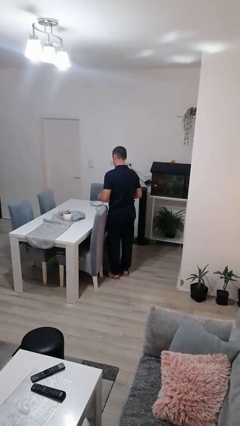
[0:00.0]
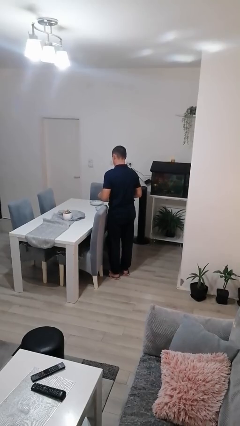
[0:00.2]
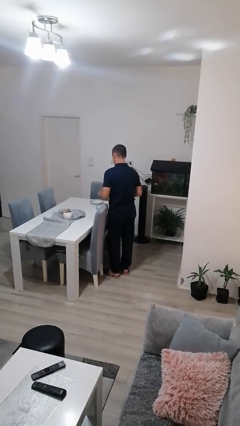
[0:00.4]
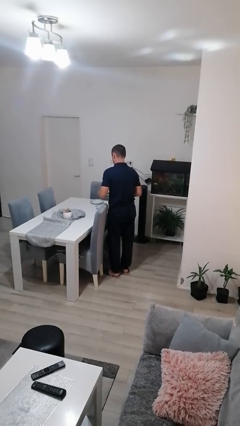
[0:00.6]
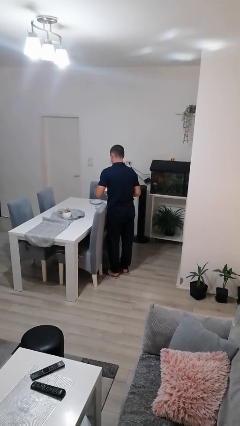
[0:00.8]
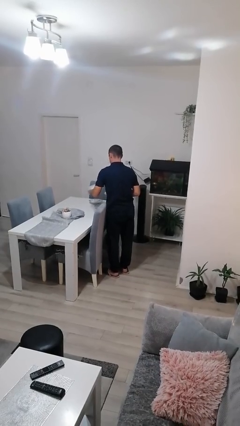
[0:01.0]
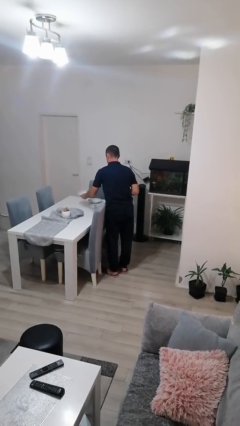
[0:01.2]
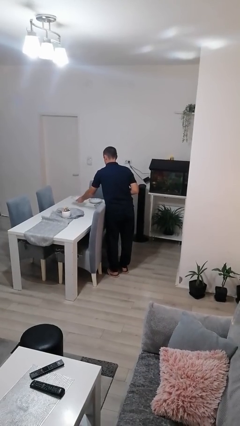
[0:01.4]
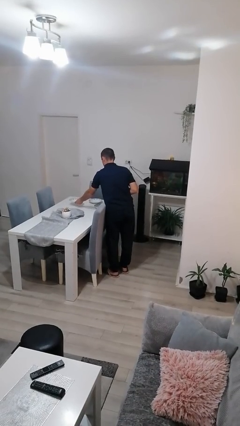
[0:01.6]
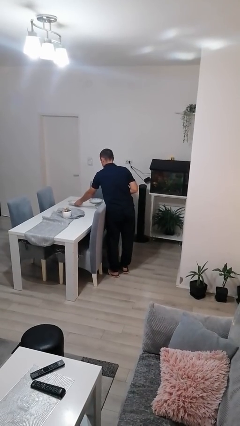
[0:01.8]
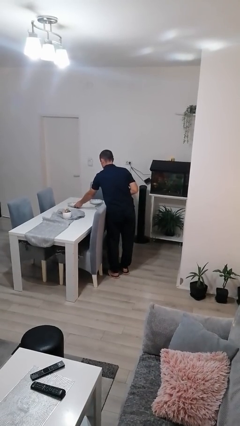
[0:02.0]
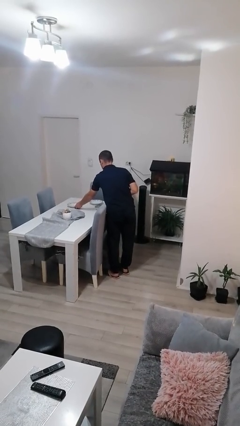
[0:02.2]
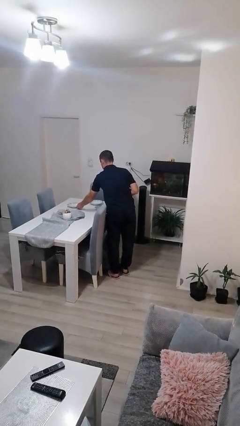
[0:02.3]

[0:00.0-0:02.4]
person sets table

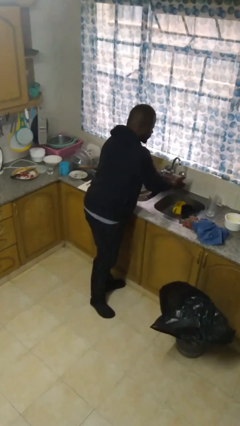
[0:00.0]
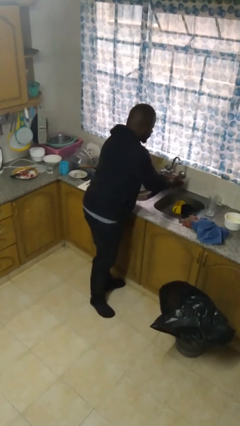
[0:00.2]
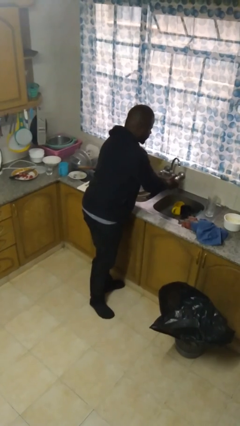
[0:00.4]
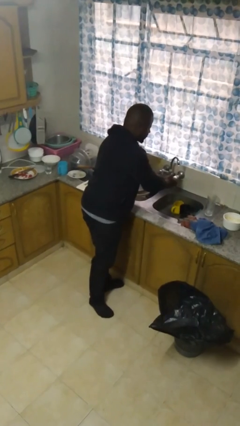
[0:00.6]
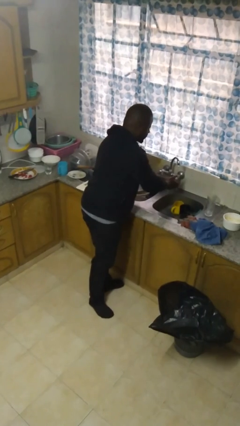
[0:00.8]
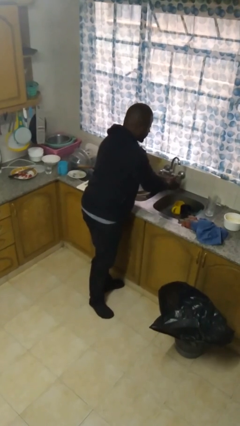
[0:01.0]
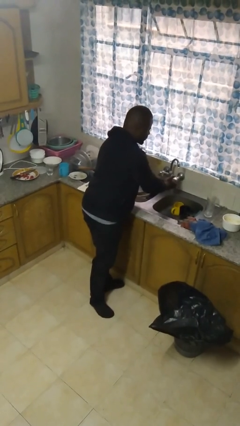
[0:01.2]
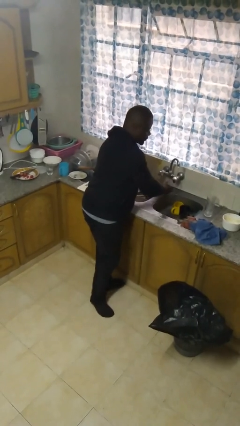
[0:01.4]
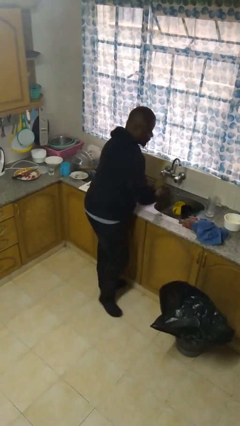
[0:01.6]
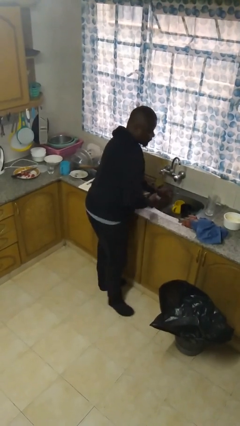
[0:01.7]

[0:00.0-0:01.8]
person washes hands

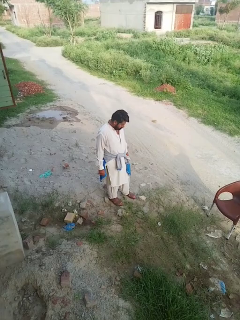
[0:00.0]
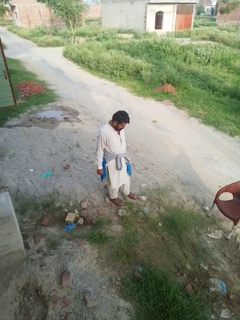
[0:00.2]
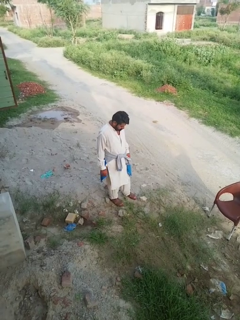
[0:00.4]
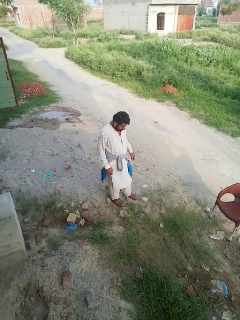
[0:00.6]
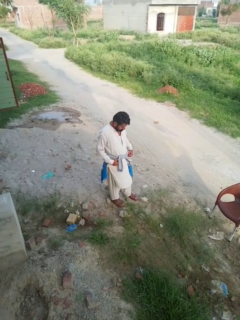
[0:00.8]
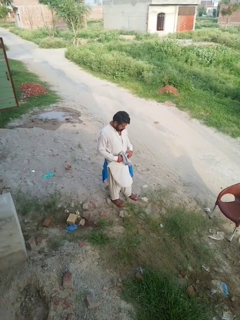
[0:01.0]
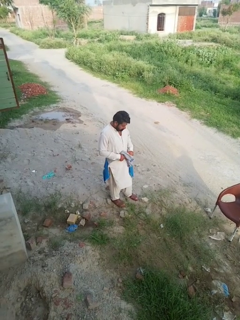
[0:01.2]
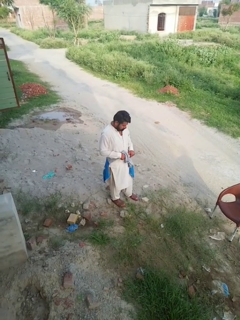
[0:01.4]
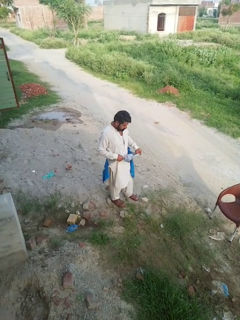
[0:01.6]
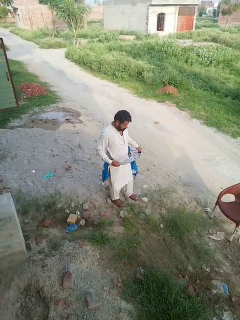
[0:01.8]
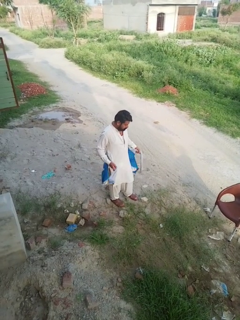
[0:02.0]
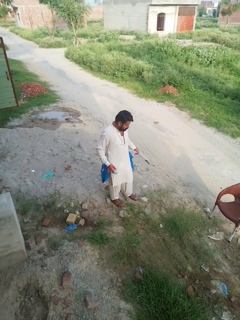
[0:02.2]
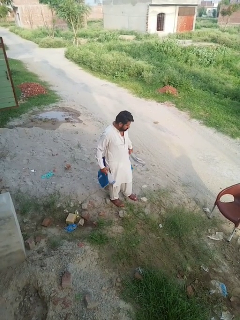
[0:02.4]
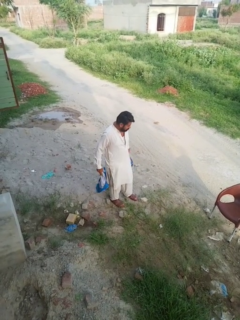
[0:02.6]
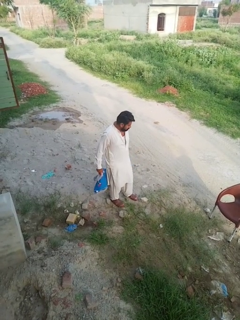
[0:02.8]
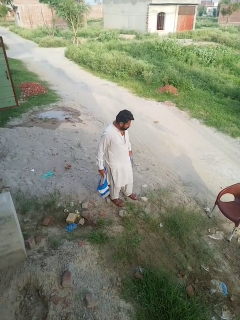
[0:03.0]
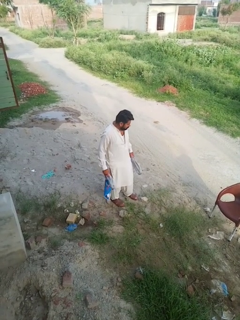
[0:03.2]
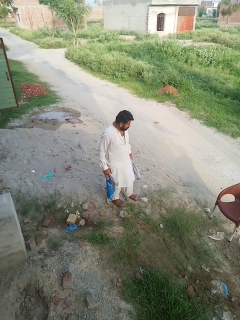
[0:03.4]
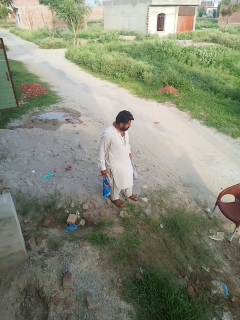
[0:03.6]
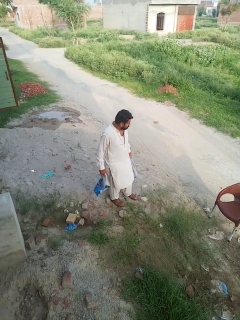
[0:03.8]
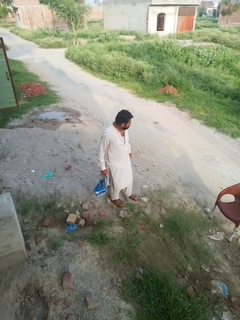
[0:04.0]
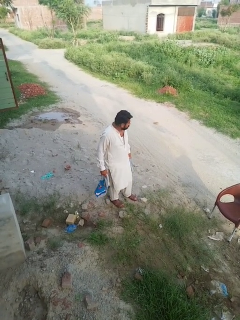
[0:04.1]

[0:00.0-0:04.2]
person unties jacket around waist

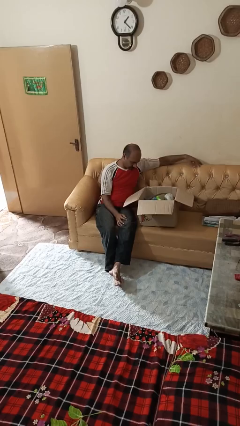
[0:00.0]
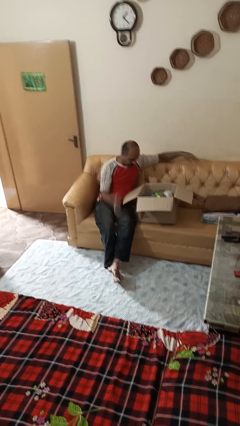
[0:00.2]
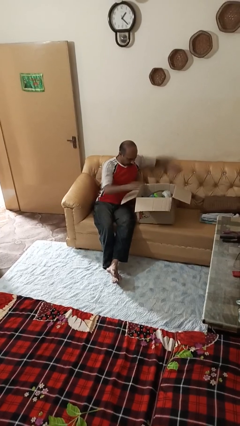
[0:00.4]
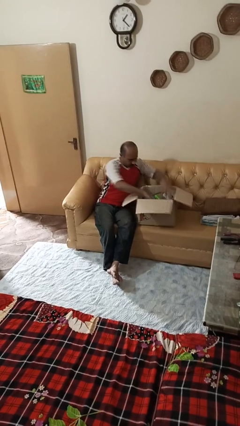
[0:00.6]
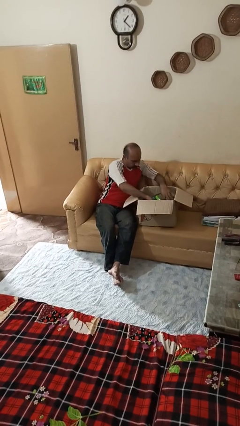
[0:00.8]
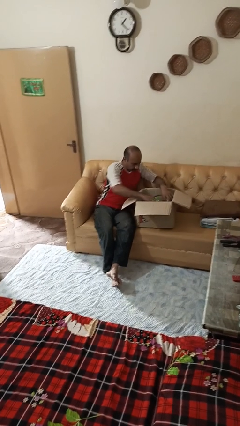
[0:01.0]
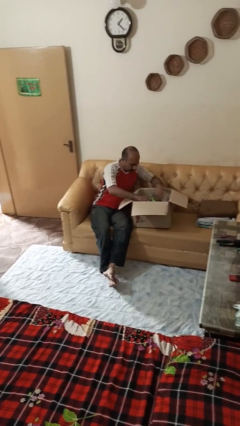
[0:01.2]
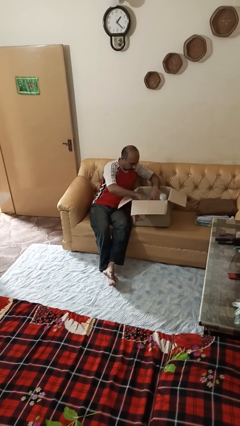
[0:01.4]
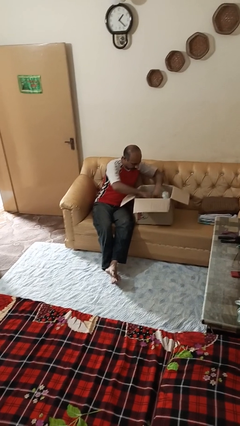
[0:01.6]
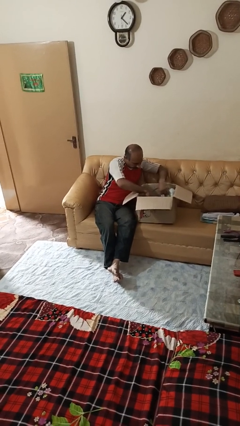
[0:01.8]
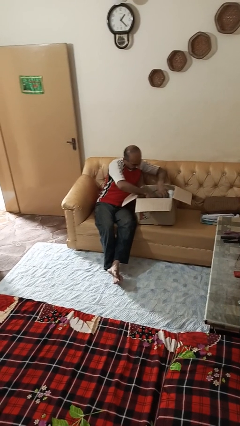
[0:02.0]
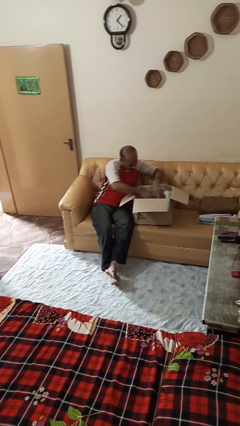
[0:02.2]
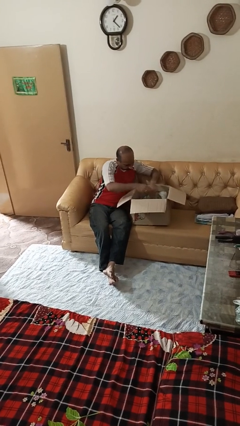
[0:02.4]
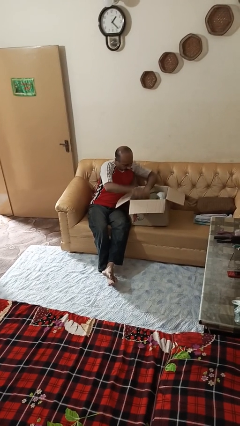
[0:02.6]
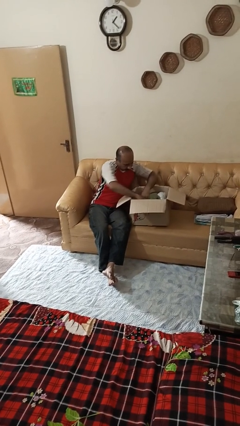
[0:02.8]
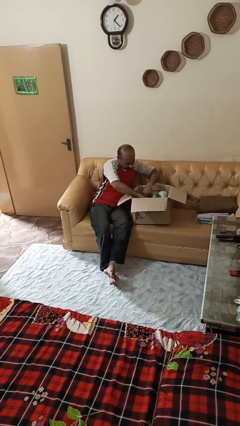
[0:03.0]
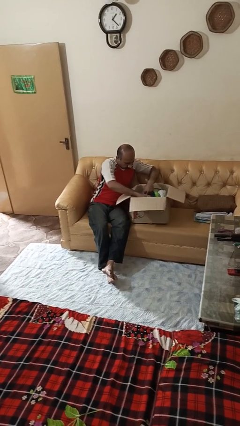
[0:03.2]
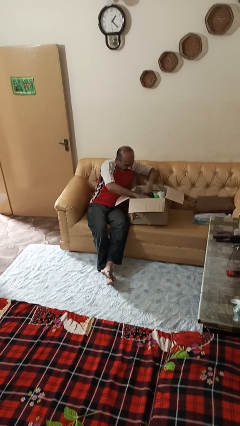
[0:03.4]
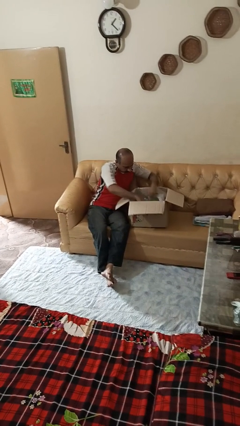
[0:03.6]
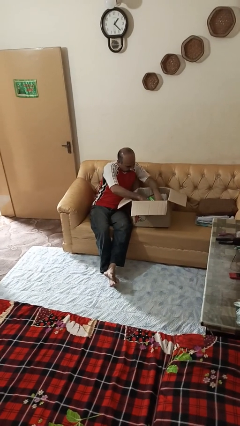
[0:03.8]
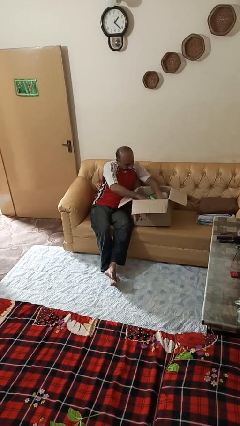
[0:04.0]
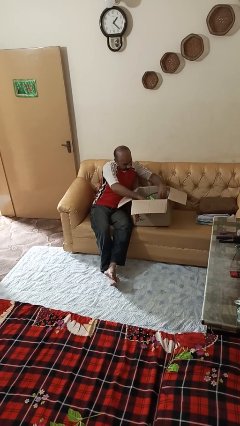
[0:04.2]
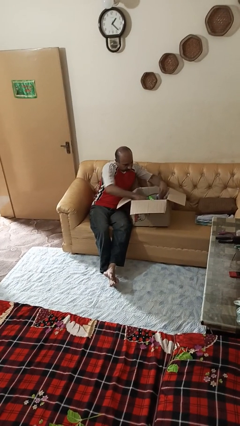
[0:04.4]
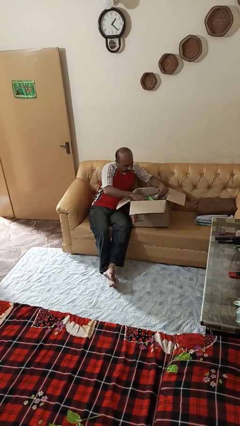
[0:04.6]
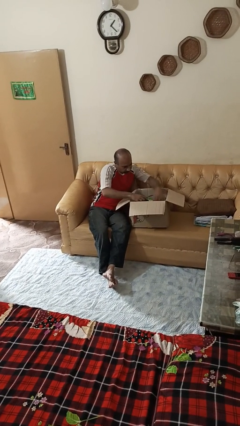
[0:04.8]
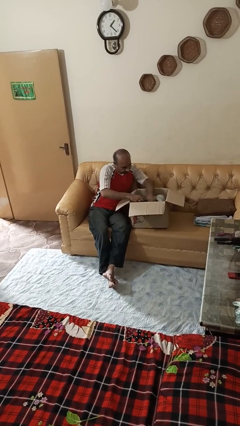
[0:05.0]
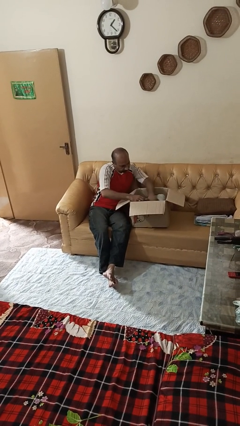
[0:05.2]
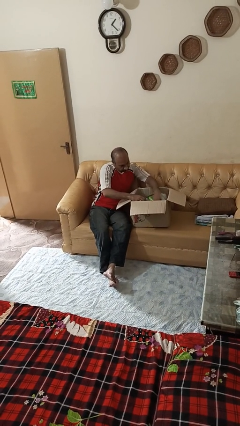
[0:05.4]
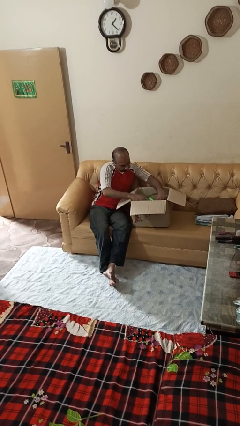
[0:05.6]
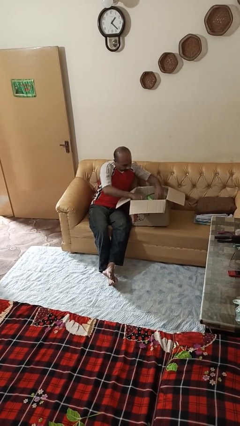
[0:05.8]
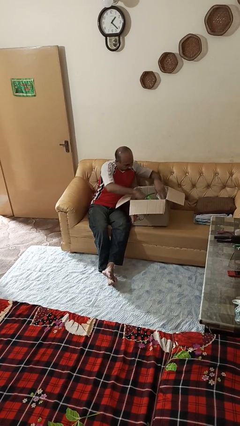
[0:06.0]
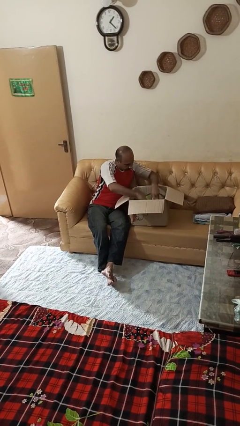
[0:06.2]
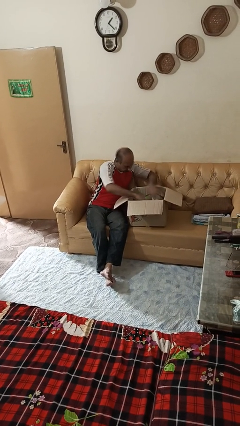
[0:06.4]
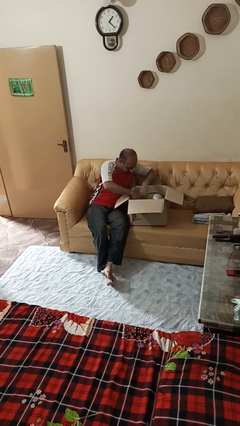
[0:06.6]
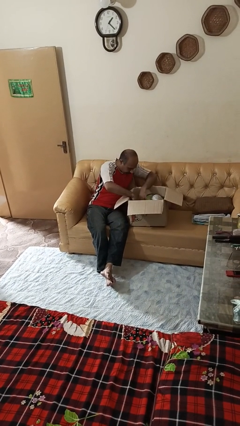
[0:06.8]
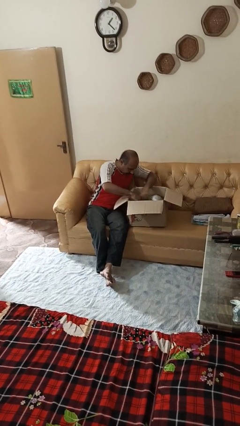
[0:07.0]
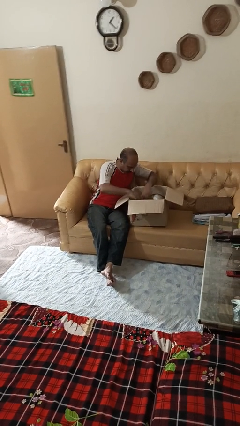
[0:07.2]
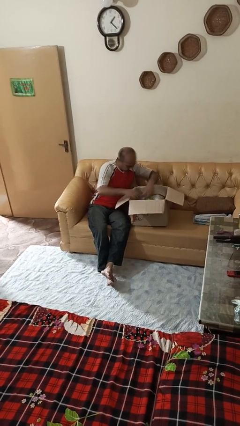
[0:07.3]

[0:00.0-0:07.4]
person searches in box

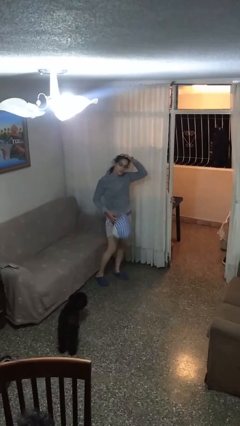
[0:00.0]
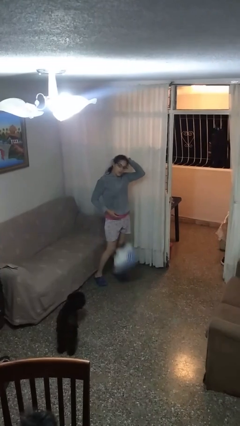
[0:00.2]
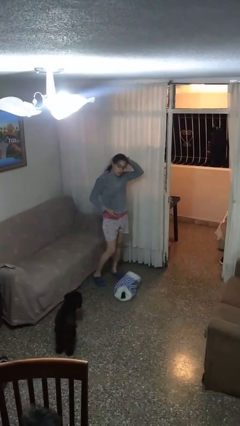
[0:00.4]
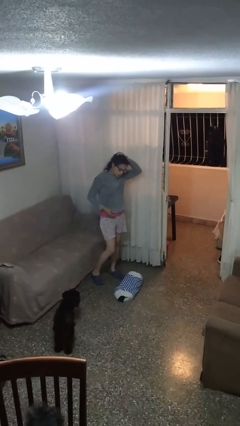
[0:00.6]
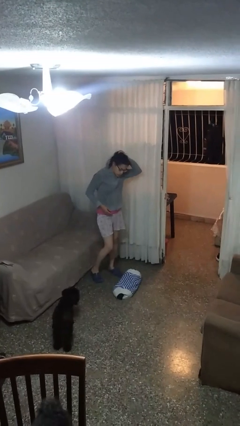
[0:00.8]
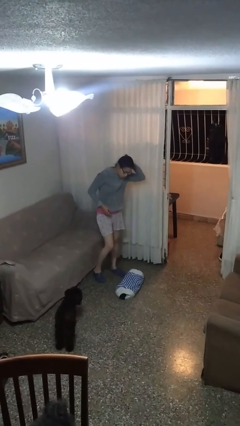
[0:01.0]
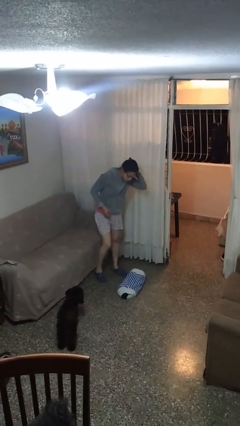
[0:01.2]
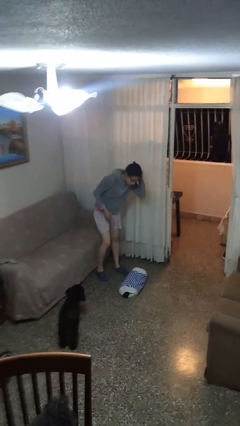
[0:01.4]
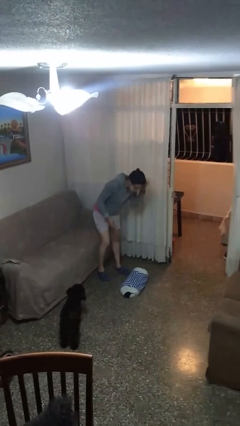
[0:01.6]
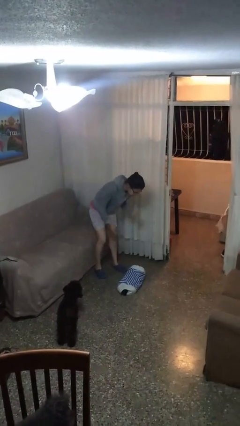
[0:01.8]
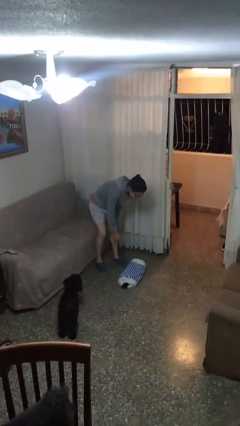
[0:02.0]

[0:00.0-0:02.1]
person drops object

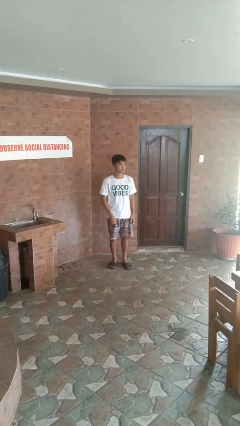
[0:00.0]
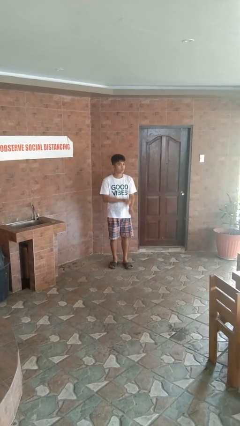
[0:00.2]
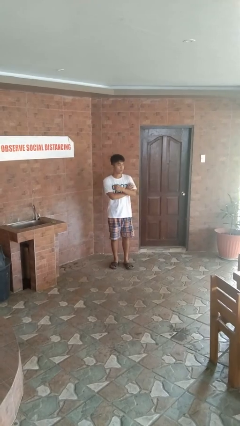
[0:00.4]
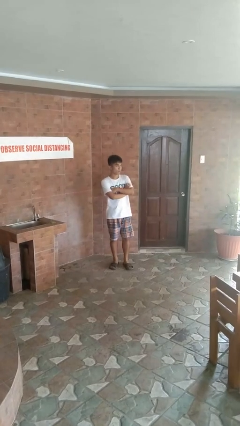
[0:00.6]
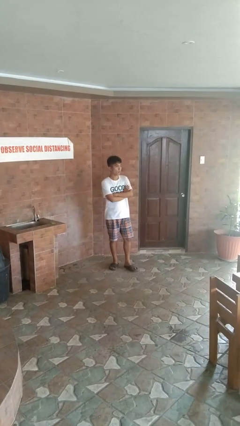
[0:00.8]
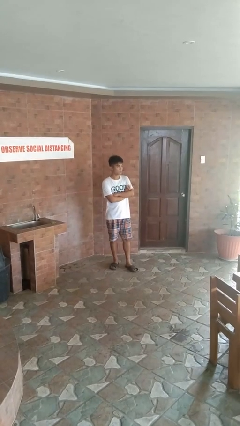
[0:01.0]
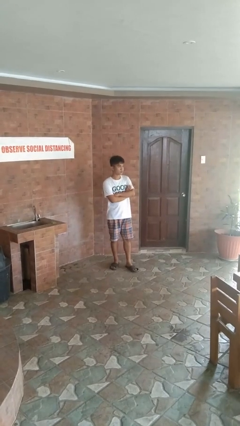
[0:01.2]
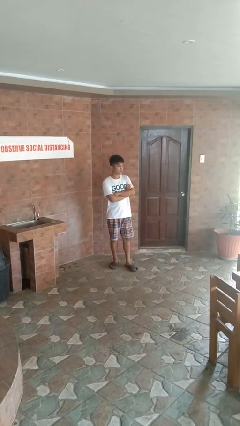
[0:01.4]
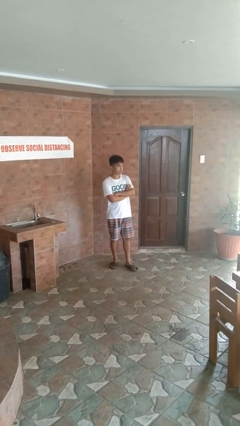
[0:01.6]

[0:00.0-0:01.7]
person crosses arms
